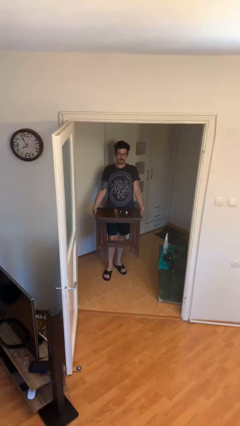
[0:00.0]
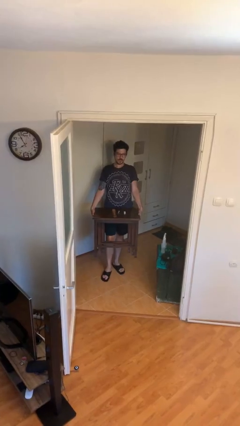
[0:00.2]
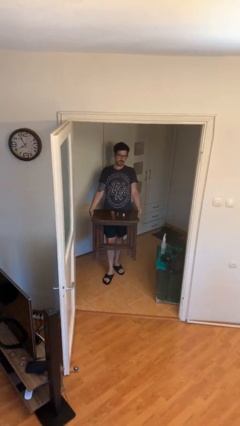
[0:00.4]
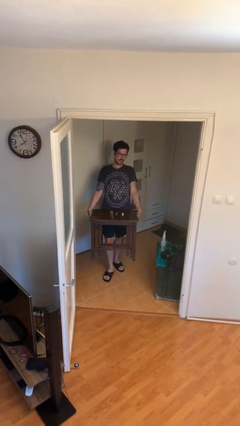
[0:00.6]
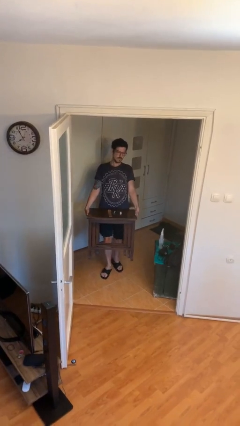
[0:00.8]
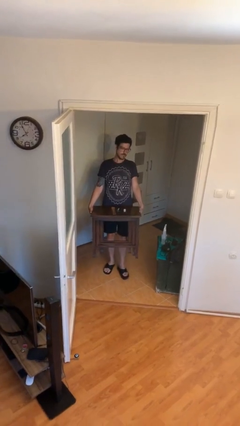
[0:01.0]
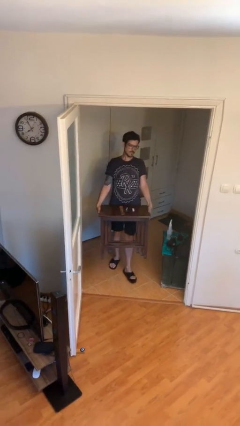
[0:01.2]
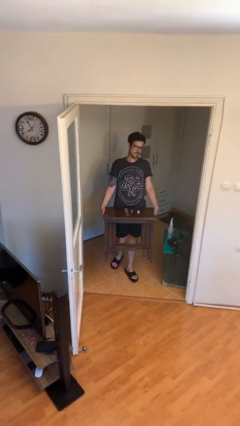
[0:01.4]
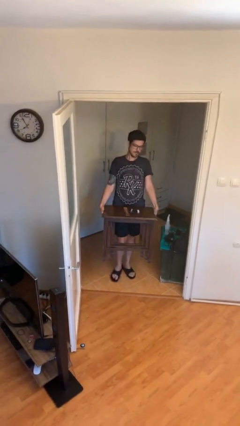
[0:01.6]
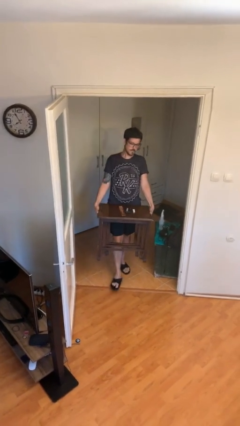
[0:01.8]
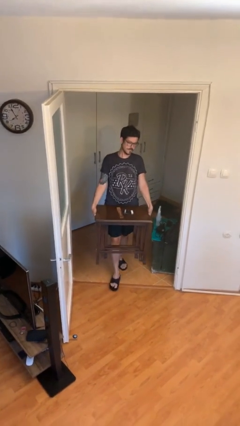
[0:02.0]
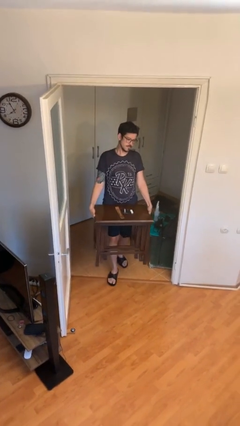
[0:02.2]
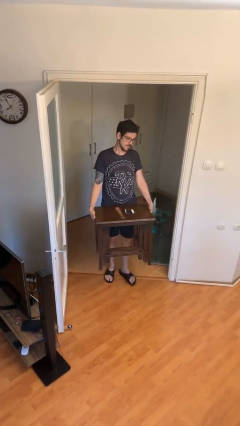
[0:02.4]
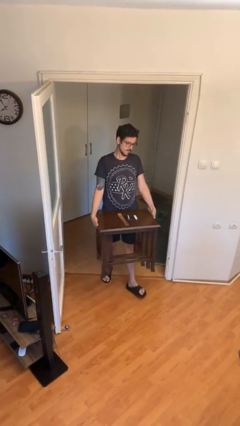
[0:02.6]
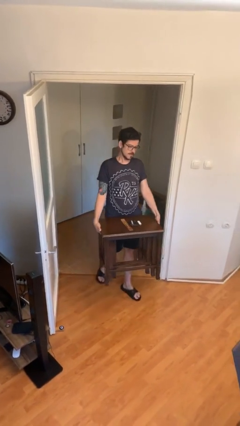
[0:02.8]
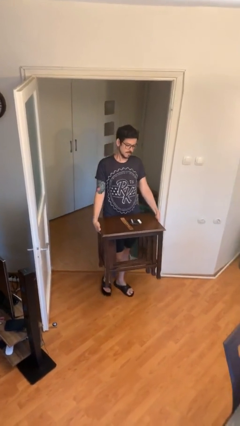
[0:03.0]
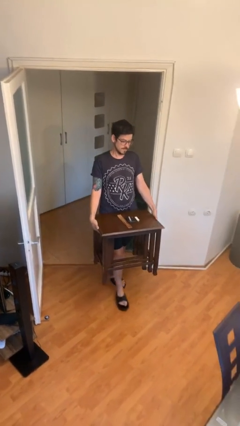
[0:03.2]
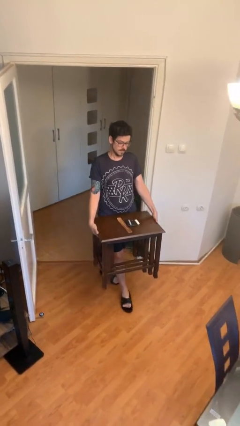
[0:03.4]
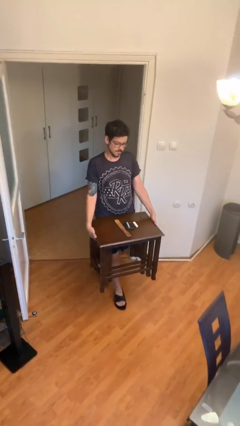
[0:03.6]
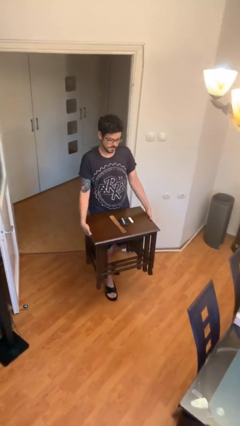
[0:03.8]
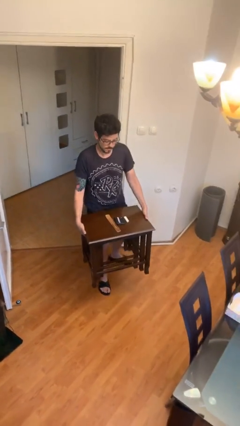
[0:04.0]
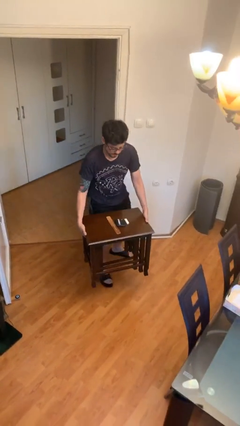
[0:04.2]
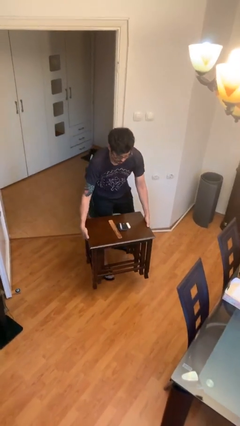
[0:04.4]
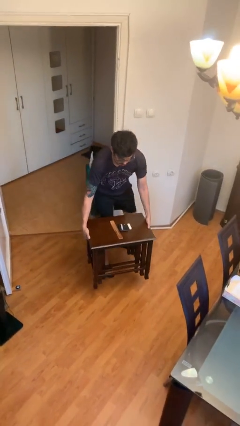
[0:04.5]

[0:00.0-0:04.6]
person carries heavy object

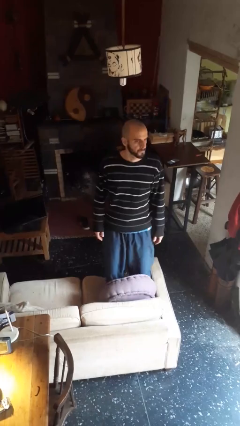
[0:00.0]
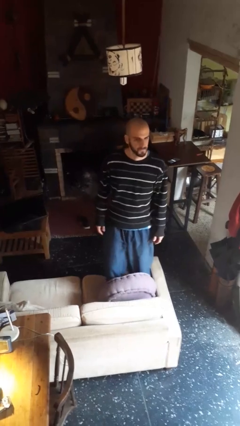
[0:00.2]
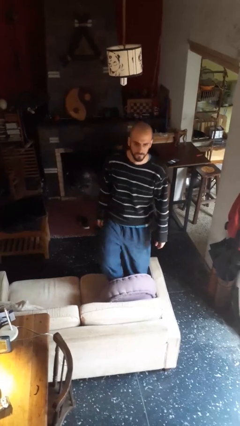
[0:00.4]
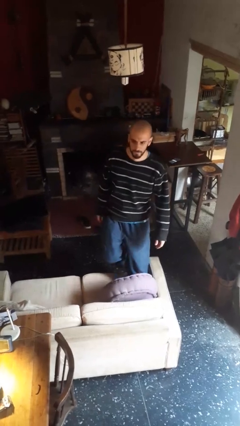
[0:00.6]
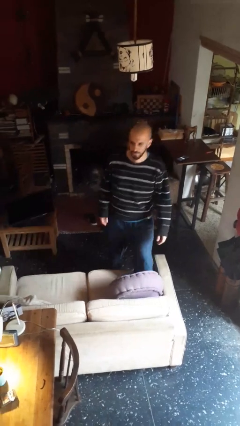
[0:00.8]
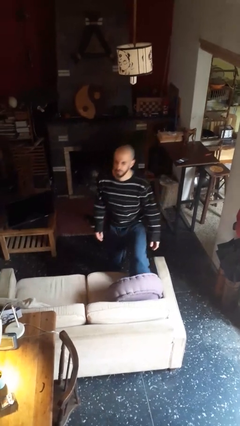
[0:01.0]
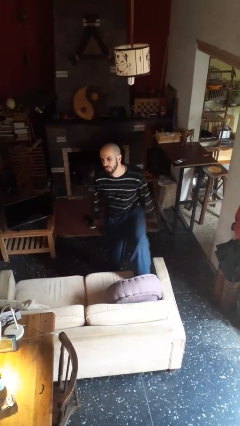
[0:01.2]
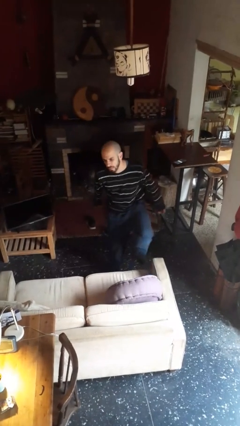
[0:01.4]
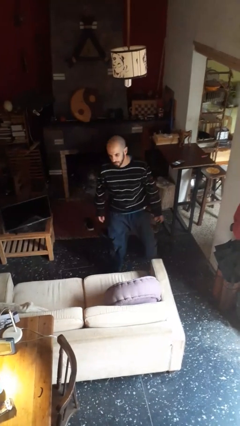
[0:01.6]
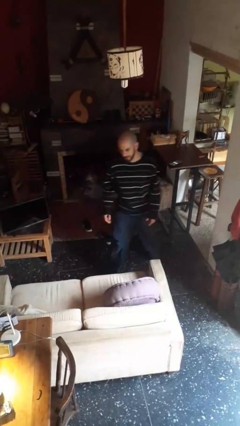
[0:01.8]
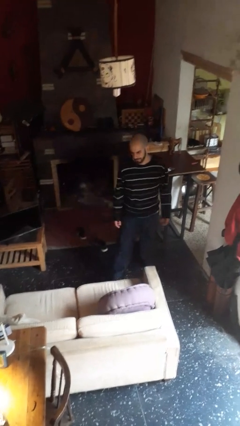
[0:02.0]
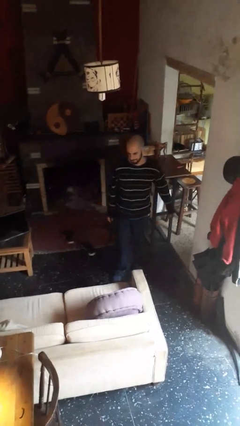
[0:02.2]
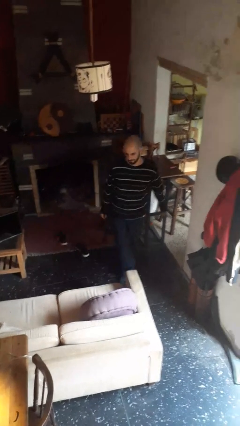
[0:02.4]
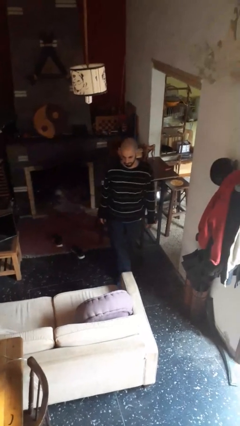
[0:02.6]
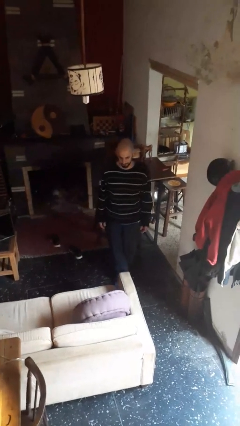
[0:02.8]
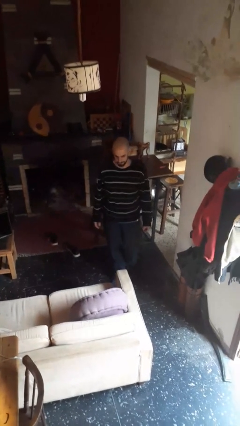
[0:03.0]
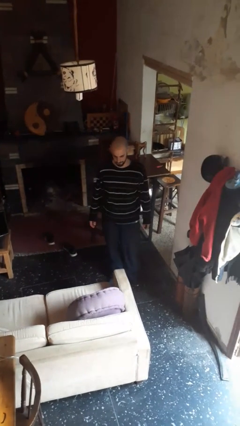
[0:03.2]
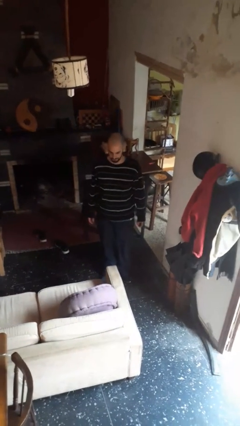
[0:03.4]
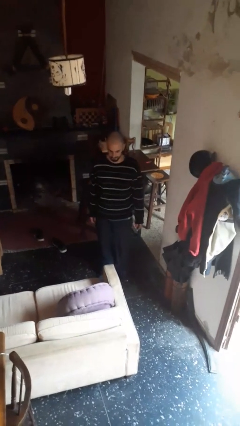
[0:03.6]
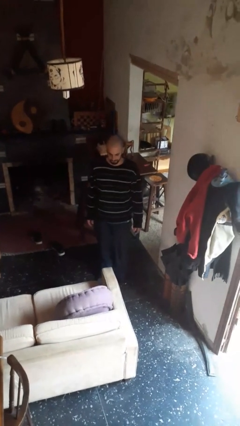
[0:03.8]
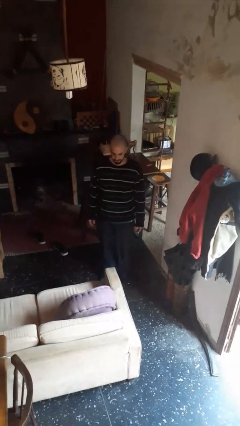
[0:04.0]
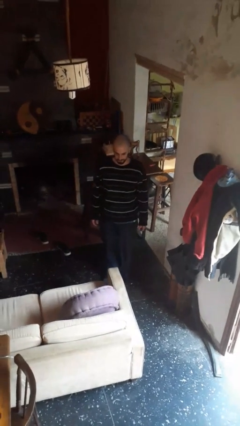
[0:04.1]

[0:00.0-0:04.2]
person climbs off couch

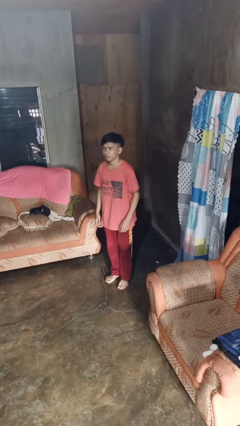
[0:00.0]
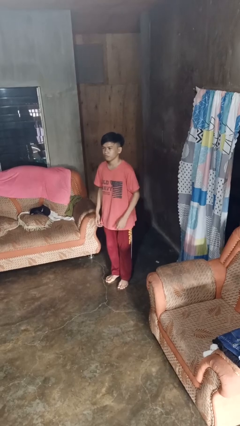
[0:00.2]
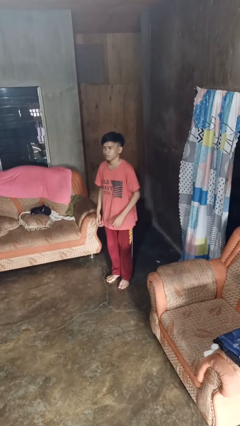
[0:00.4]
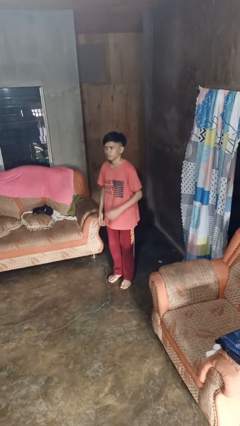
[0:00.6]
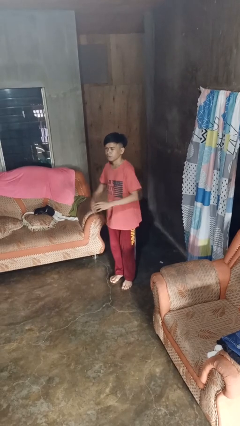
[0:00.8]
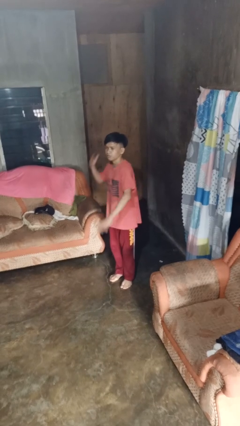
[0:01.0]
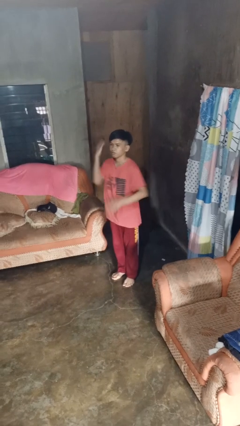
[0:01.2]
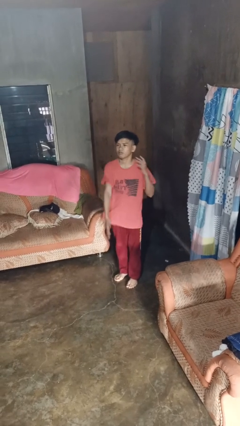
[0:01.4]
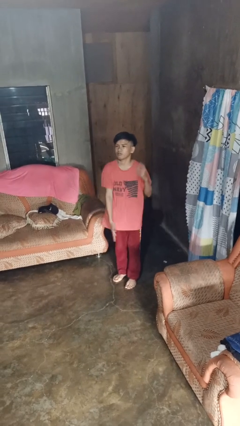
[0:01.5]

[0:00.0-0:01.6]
person karate chop

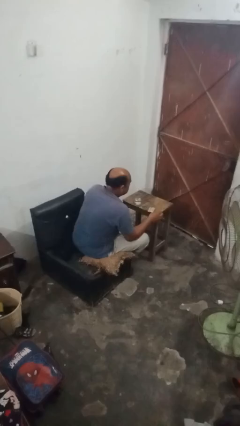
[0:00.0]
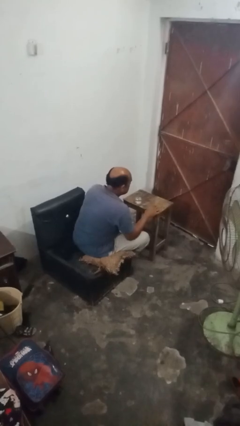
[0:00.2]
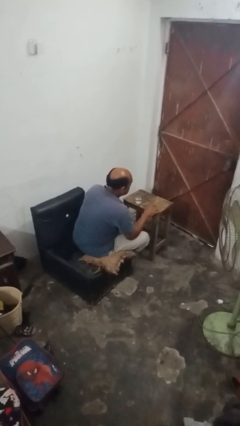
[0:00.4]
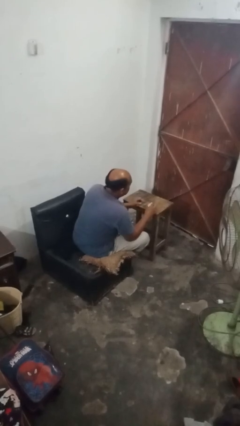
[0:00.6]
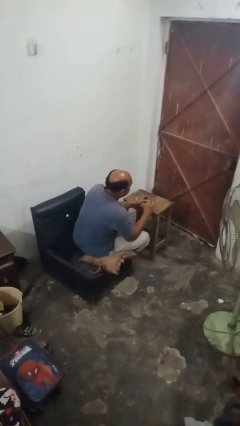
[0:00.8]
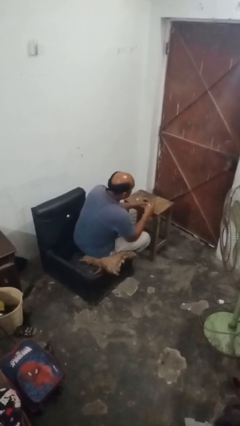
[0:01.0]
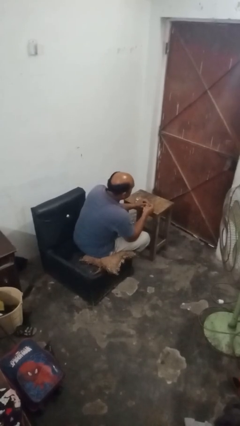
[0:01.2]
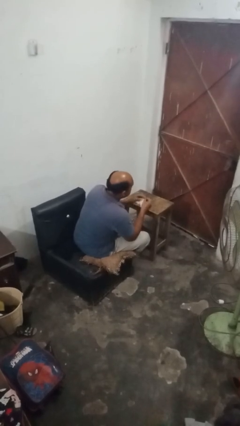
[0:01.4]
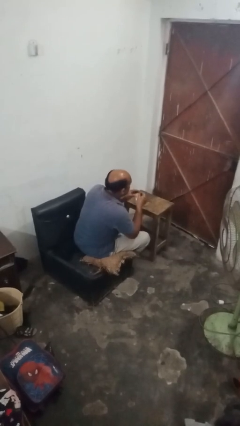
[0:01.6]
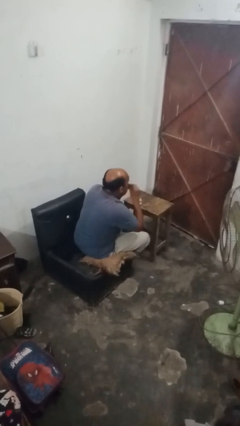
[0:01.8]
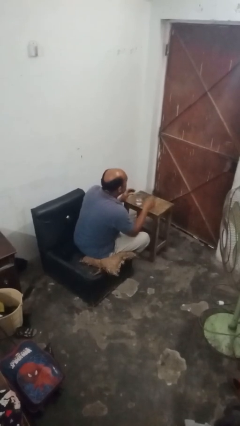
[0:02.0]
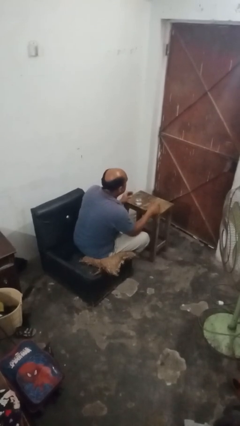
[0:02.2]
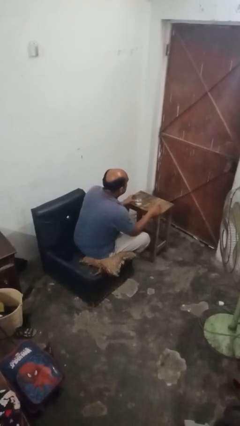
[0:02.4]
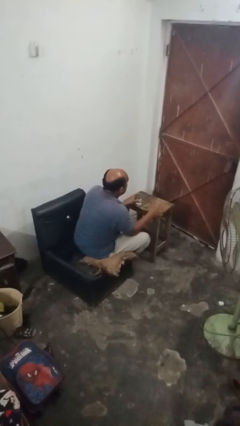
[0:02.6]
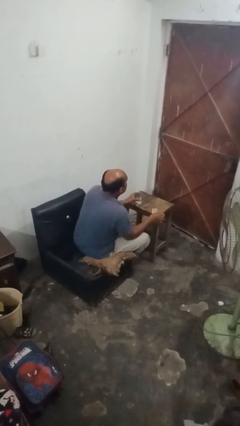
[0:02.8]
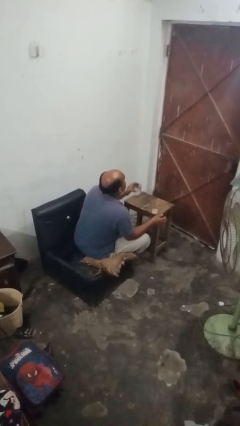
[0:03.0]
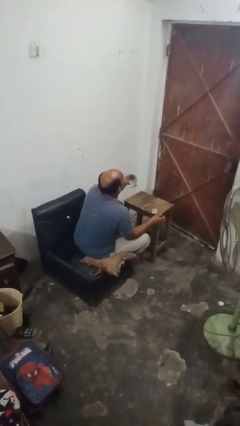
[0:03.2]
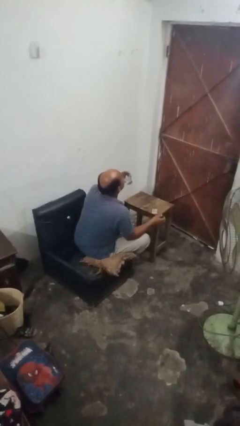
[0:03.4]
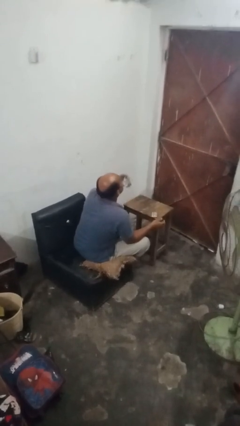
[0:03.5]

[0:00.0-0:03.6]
person takes medicine pills

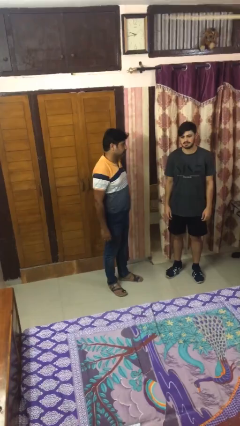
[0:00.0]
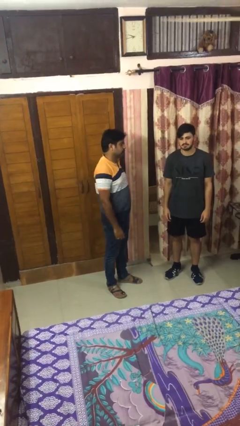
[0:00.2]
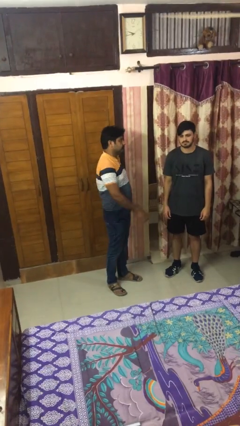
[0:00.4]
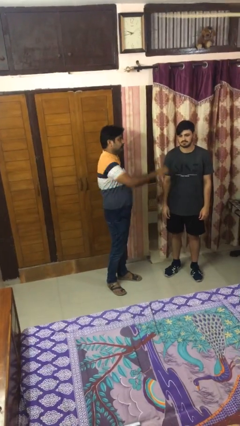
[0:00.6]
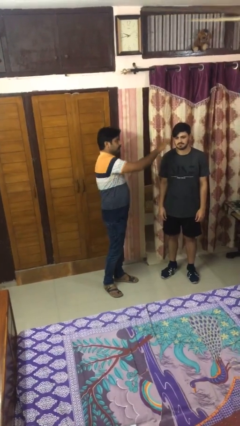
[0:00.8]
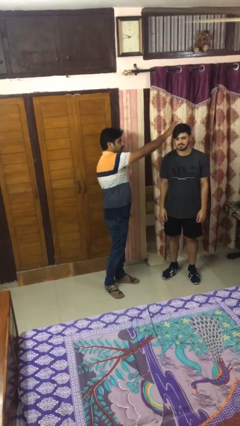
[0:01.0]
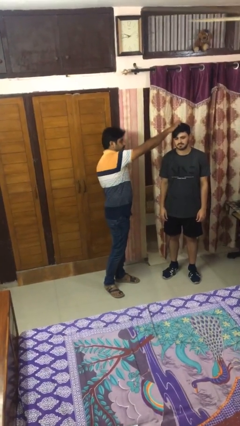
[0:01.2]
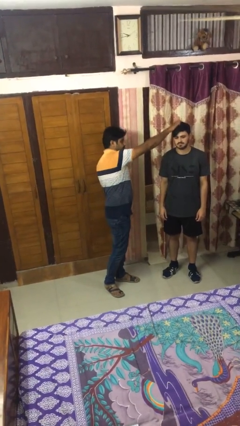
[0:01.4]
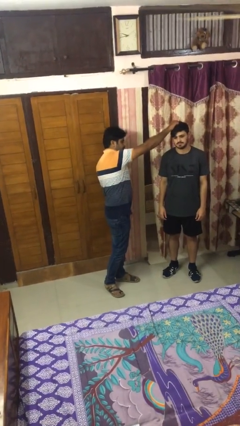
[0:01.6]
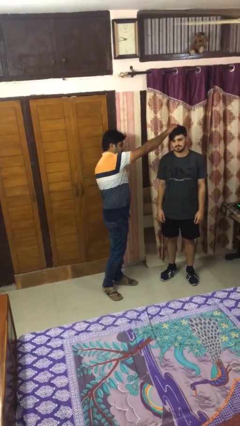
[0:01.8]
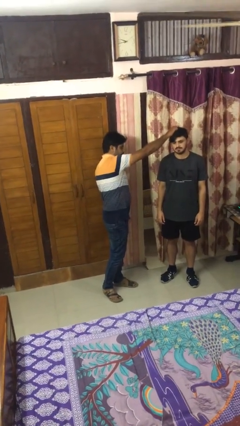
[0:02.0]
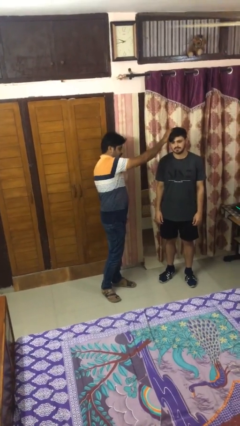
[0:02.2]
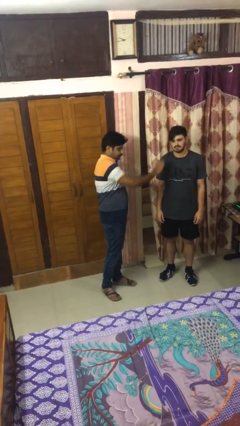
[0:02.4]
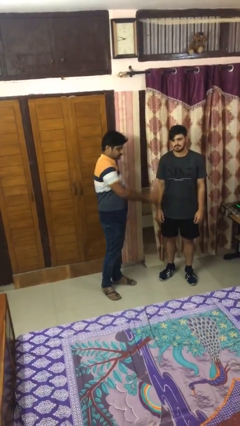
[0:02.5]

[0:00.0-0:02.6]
person grabs person by hair

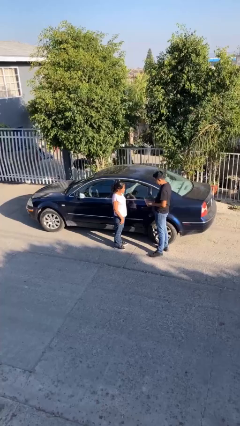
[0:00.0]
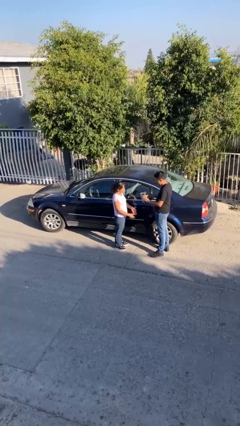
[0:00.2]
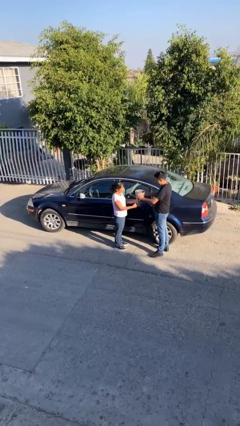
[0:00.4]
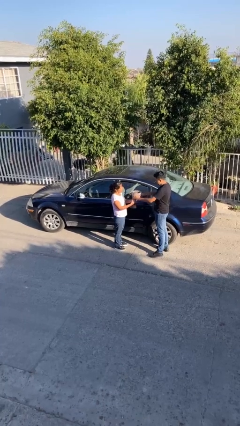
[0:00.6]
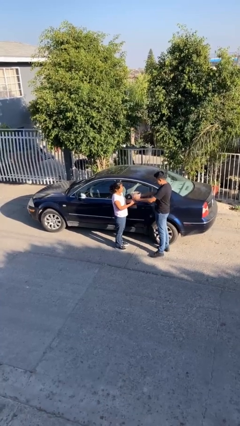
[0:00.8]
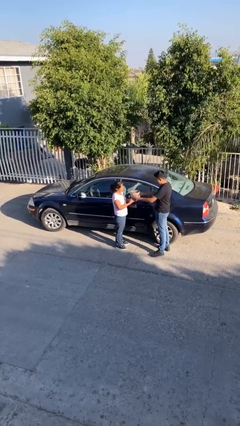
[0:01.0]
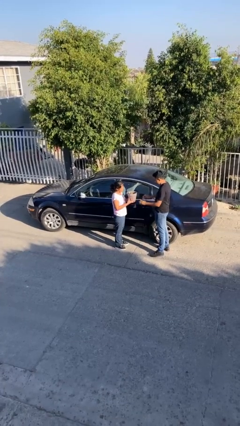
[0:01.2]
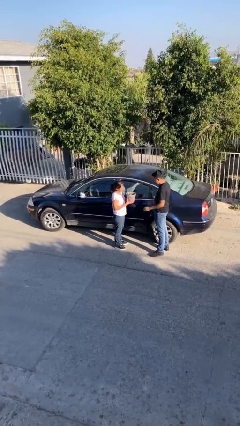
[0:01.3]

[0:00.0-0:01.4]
person transfers object to person
